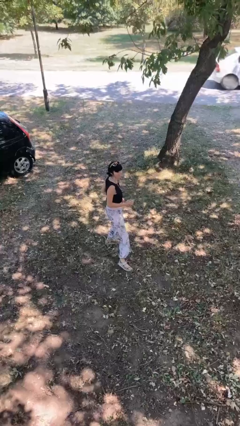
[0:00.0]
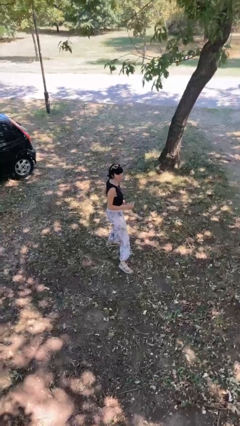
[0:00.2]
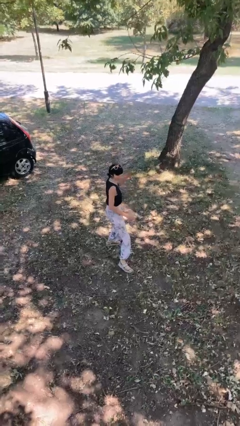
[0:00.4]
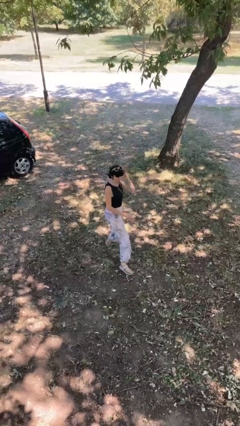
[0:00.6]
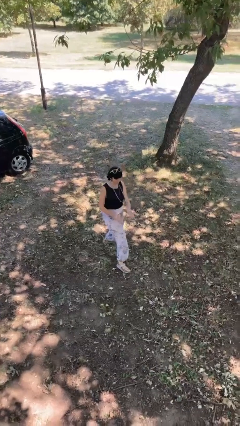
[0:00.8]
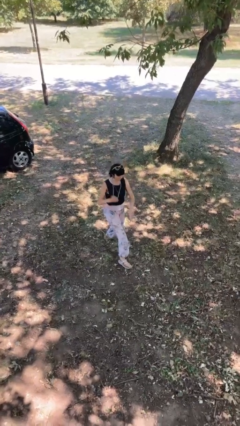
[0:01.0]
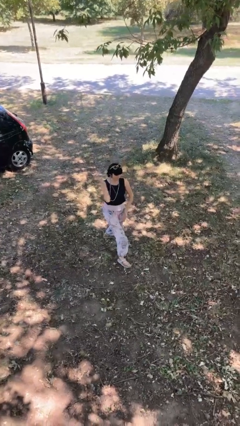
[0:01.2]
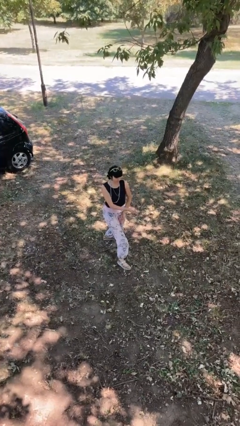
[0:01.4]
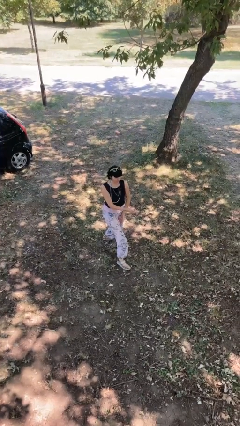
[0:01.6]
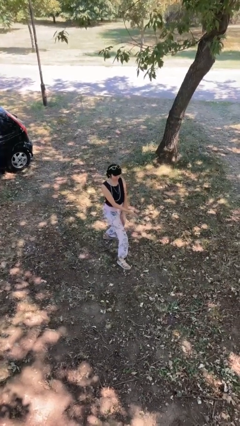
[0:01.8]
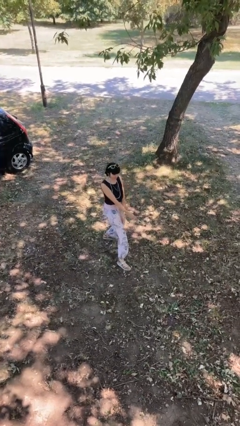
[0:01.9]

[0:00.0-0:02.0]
person karate chop

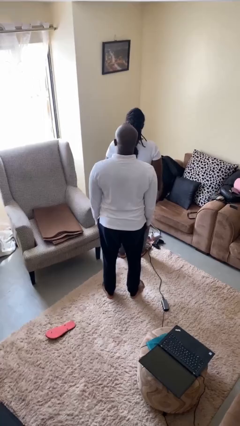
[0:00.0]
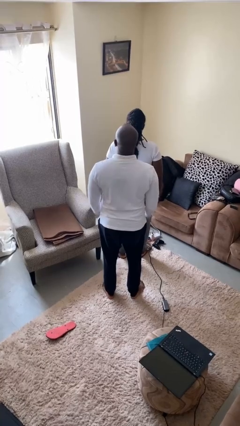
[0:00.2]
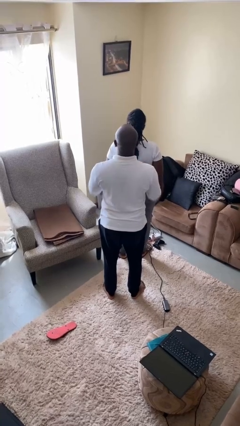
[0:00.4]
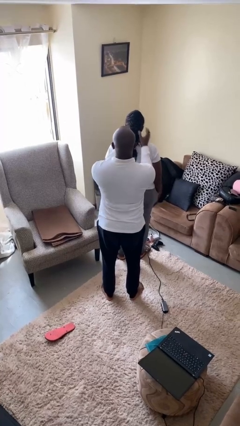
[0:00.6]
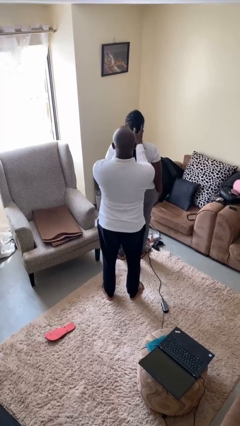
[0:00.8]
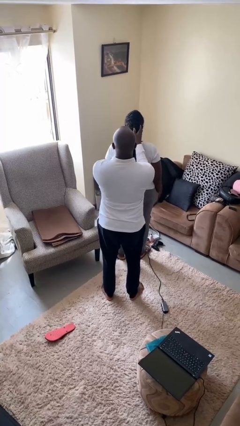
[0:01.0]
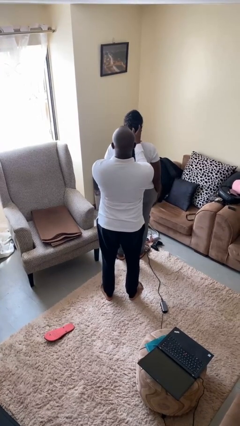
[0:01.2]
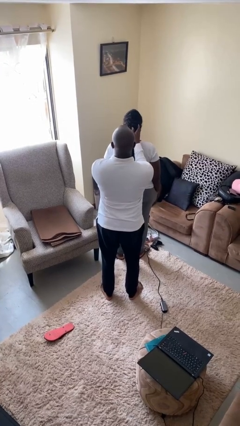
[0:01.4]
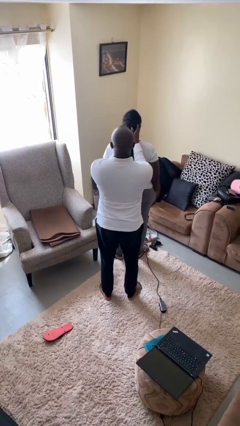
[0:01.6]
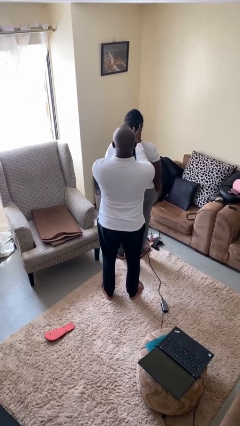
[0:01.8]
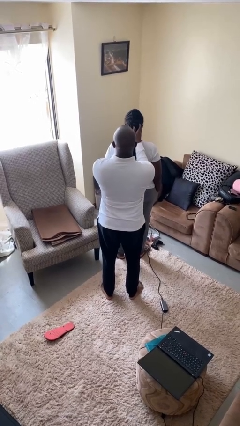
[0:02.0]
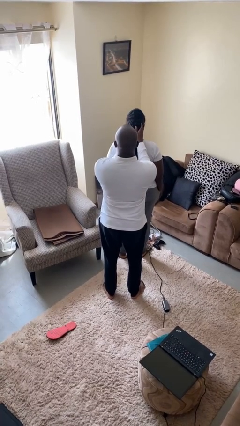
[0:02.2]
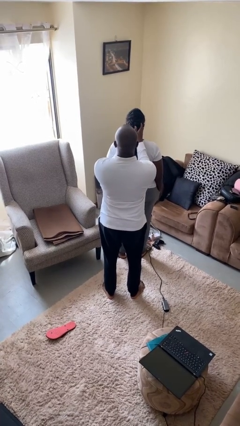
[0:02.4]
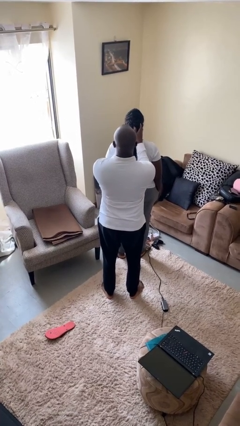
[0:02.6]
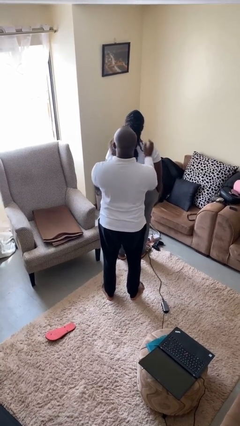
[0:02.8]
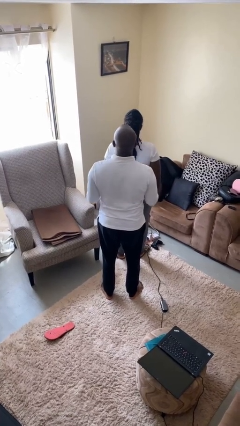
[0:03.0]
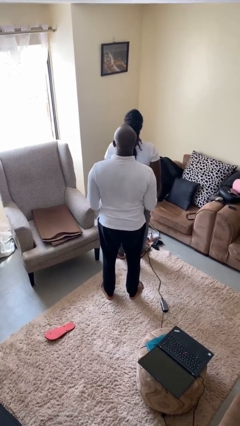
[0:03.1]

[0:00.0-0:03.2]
person grabs person by hair

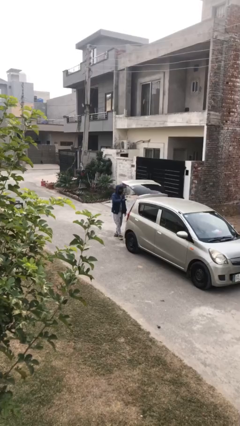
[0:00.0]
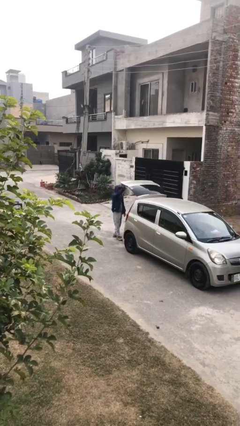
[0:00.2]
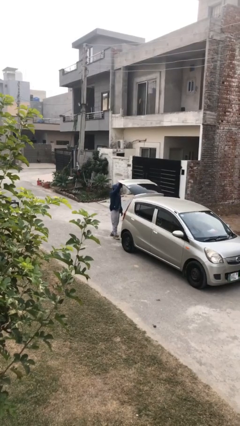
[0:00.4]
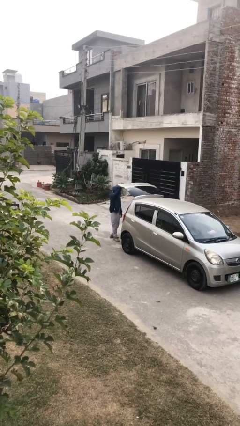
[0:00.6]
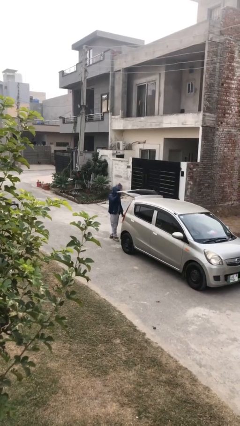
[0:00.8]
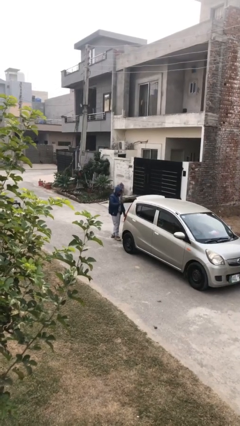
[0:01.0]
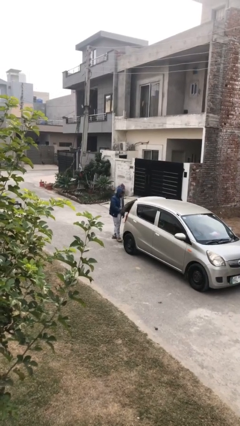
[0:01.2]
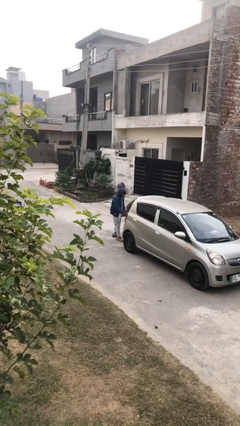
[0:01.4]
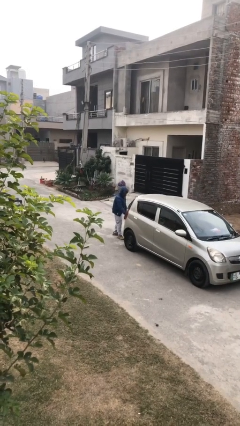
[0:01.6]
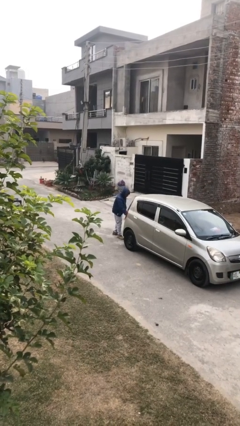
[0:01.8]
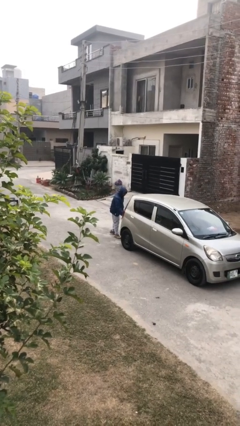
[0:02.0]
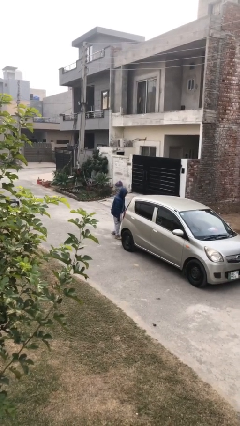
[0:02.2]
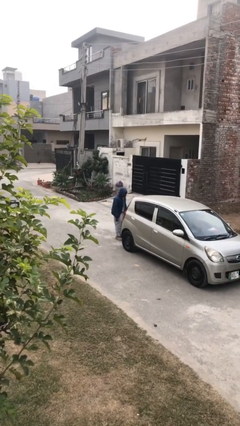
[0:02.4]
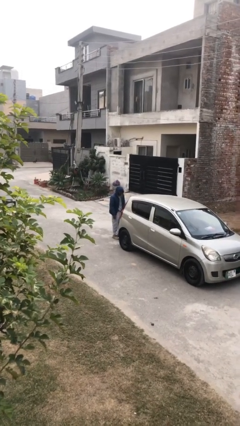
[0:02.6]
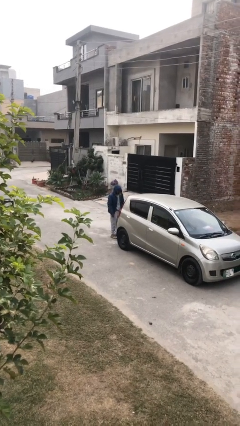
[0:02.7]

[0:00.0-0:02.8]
person closes car trunk

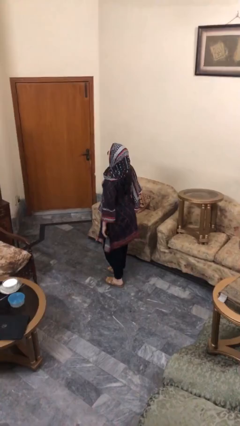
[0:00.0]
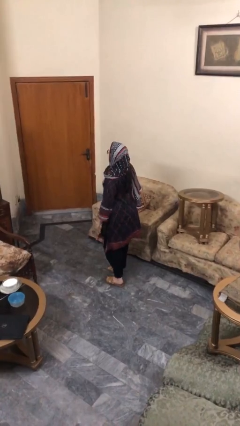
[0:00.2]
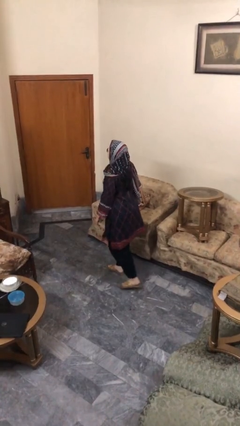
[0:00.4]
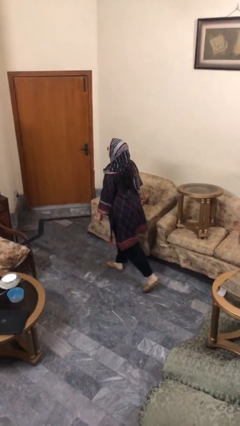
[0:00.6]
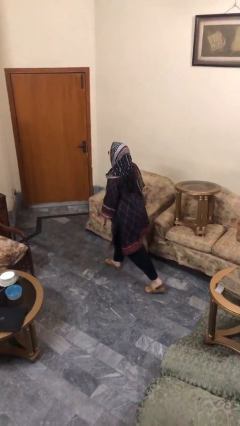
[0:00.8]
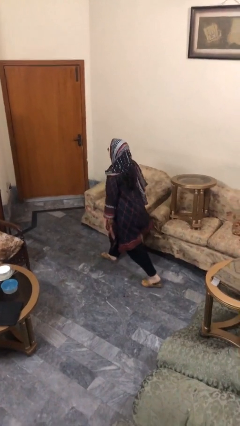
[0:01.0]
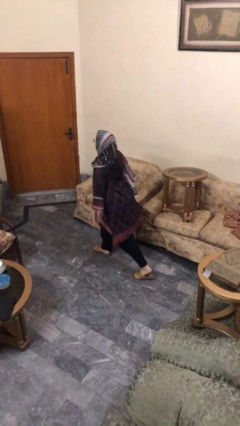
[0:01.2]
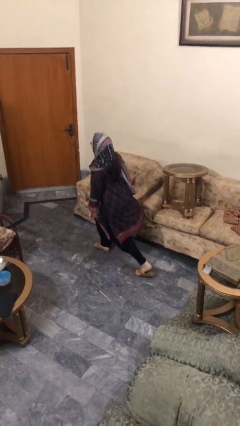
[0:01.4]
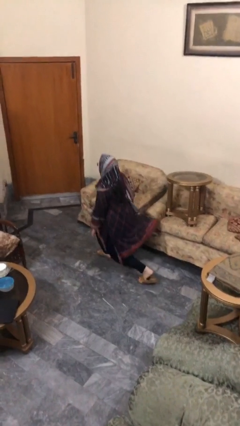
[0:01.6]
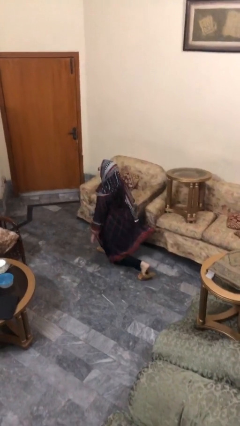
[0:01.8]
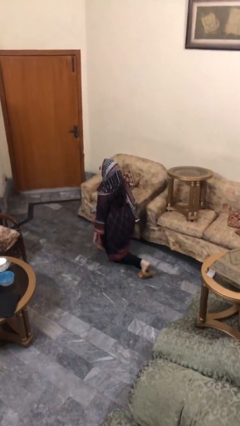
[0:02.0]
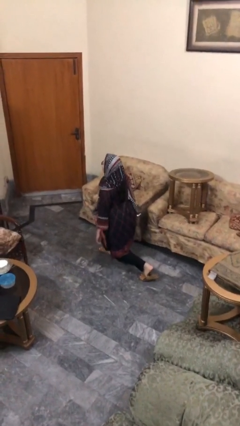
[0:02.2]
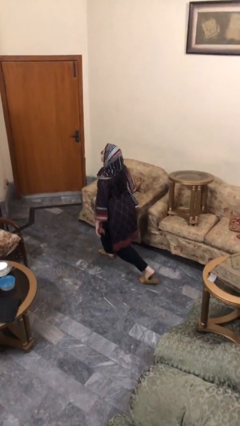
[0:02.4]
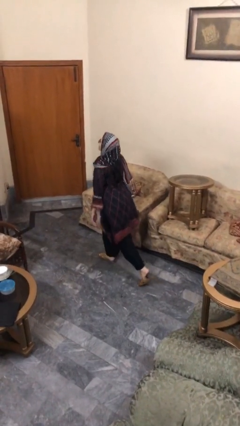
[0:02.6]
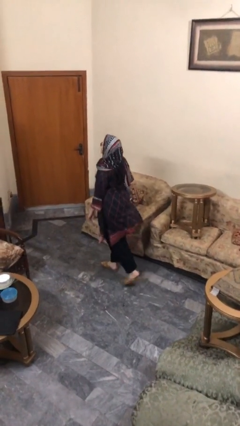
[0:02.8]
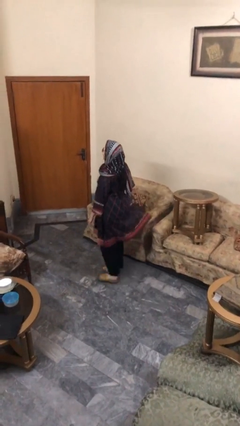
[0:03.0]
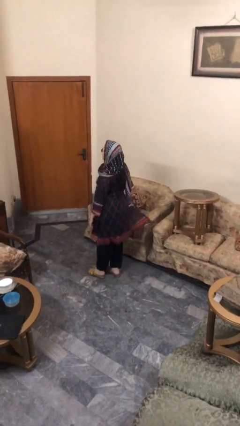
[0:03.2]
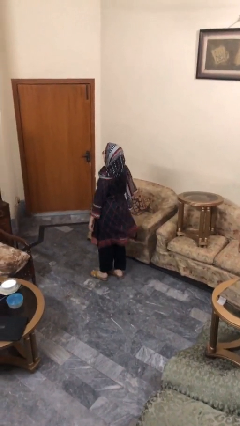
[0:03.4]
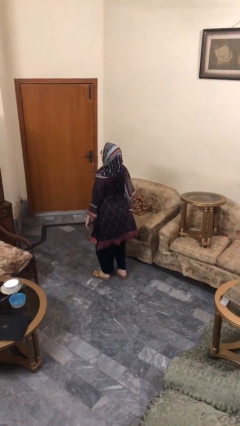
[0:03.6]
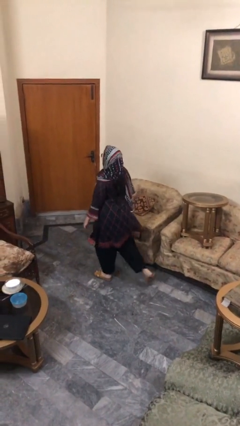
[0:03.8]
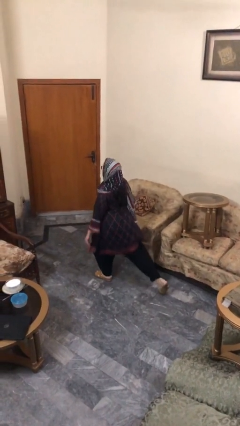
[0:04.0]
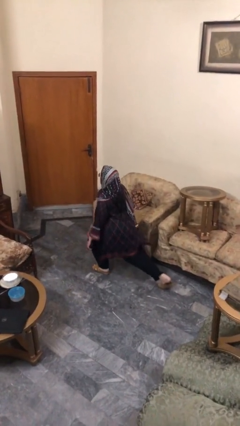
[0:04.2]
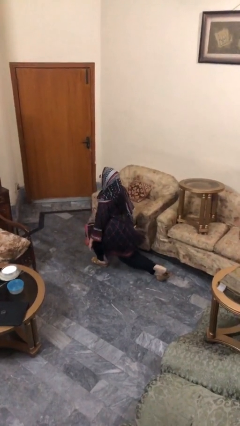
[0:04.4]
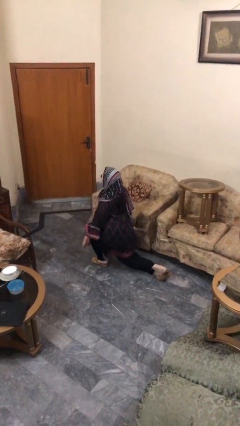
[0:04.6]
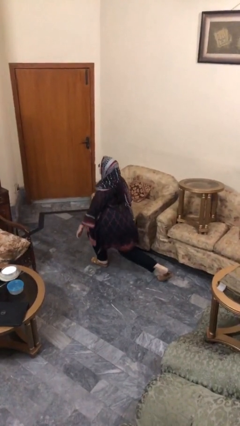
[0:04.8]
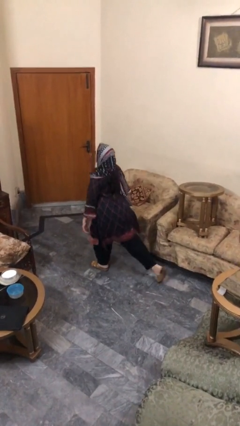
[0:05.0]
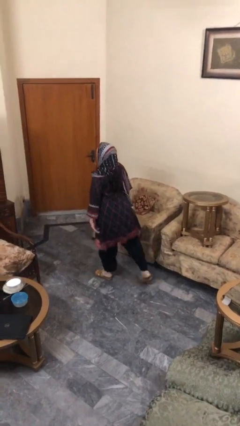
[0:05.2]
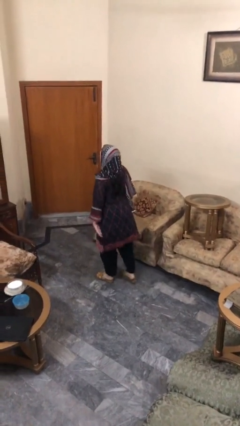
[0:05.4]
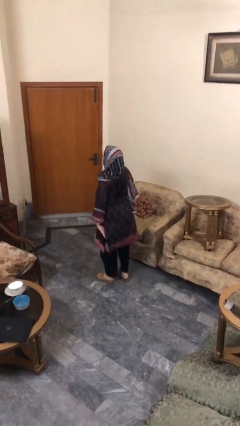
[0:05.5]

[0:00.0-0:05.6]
person exercises with lunges

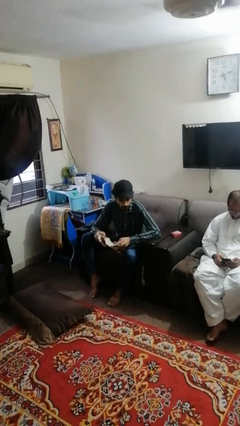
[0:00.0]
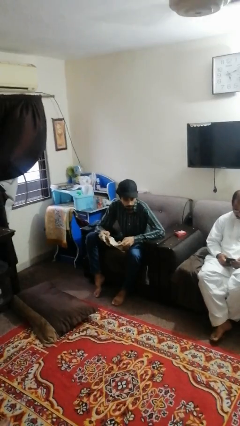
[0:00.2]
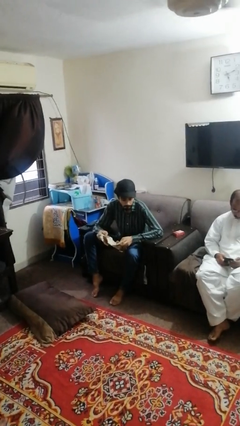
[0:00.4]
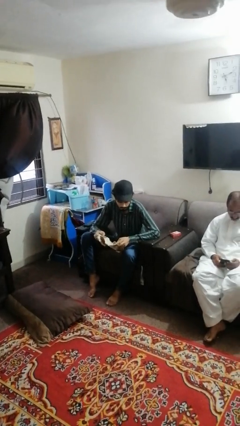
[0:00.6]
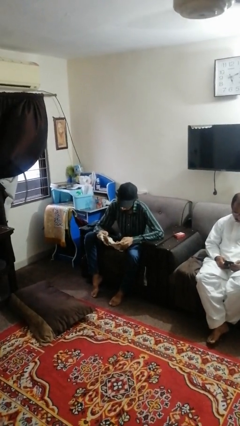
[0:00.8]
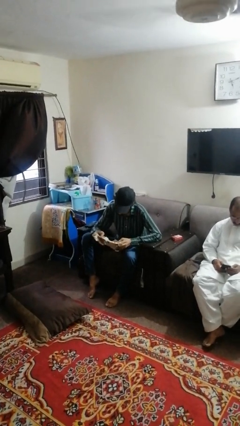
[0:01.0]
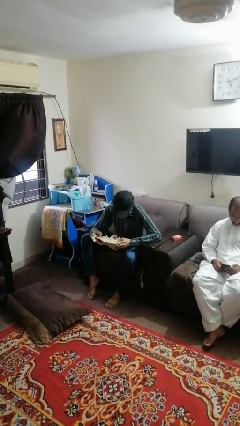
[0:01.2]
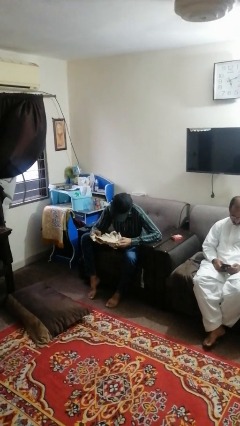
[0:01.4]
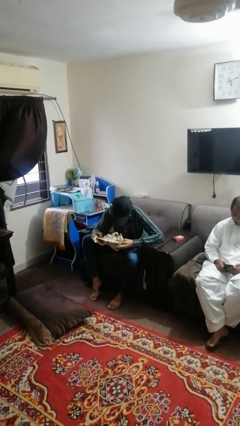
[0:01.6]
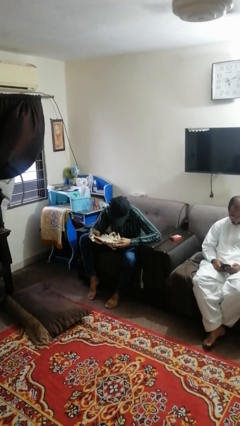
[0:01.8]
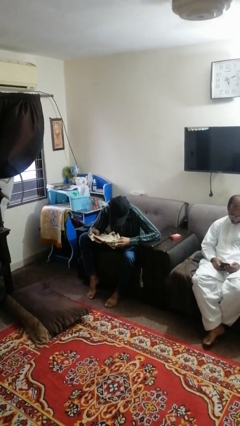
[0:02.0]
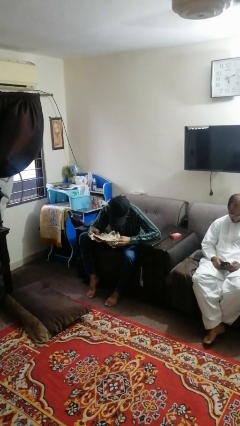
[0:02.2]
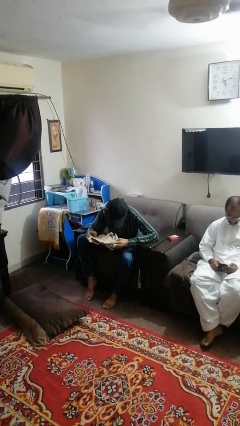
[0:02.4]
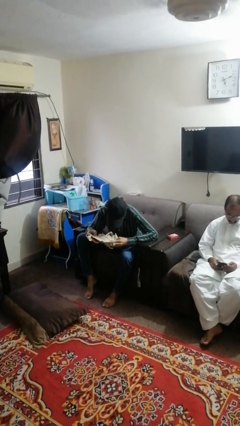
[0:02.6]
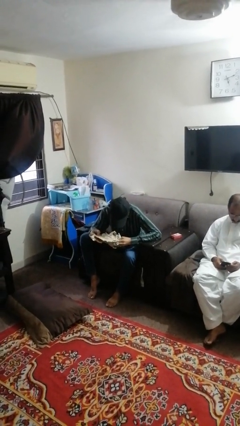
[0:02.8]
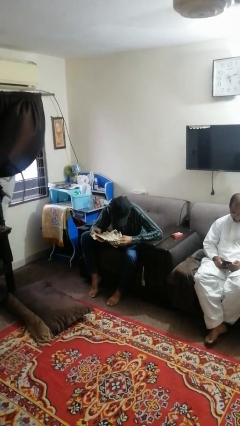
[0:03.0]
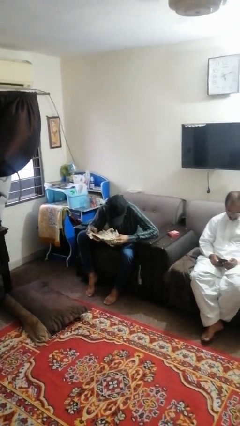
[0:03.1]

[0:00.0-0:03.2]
person reads newspaper

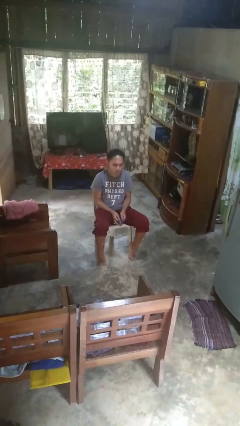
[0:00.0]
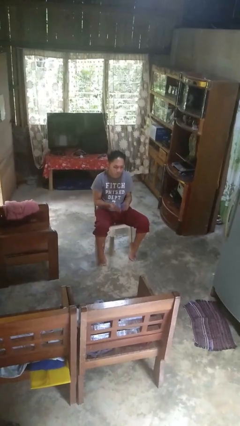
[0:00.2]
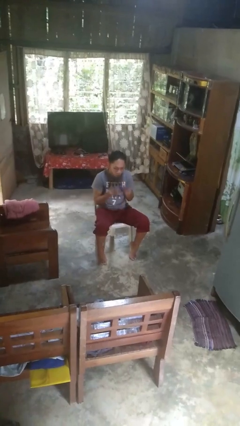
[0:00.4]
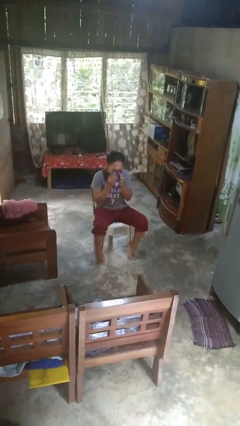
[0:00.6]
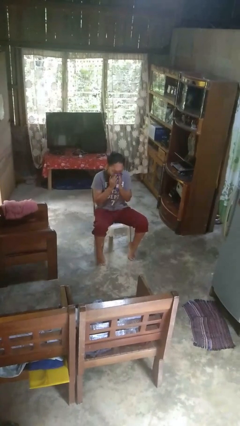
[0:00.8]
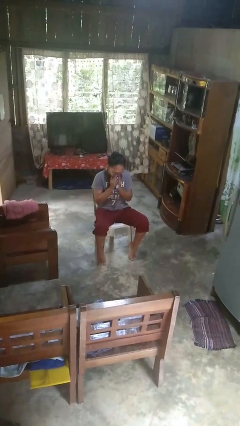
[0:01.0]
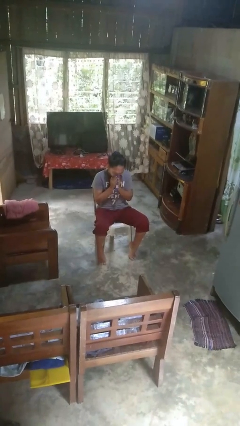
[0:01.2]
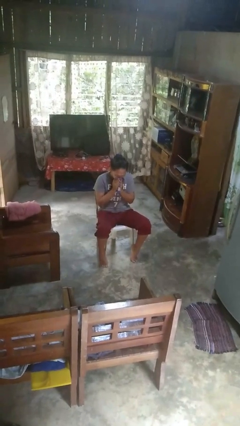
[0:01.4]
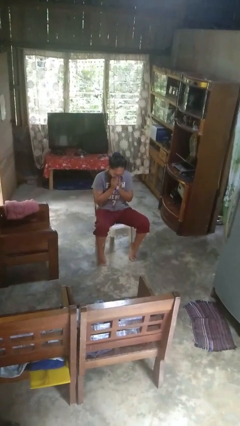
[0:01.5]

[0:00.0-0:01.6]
person blows nose
